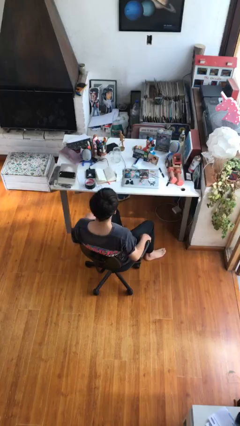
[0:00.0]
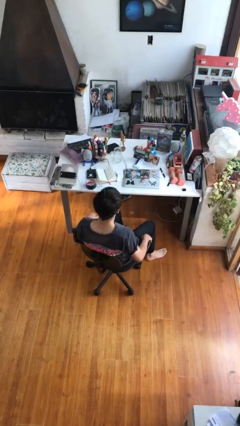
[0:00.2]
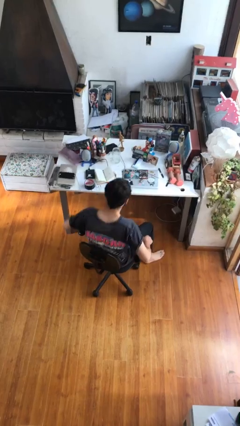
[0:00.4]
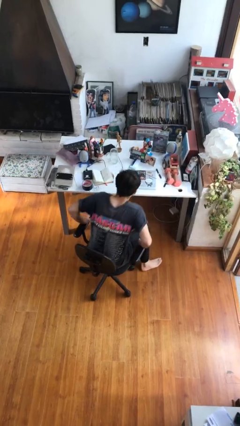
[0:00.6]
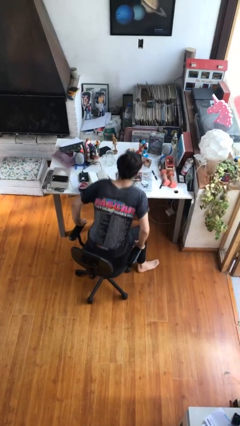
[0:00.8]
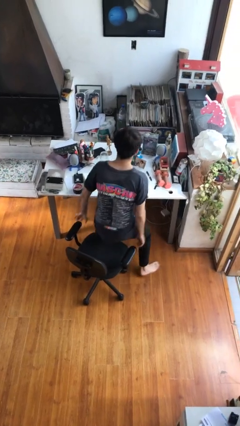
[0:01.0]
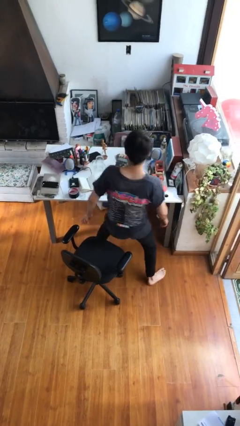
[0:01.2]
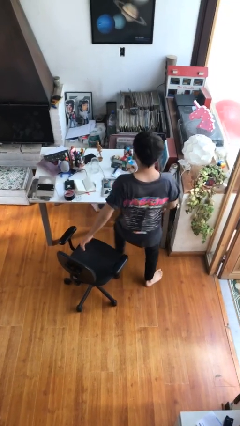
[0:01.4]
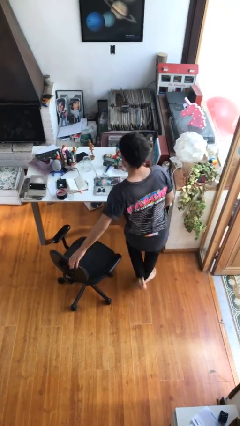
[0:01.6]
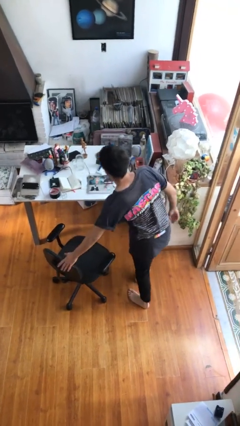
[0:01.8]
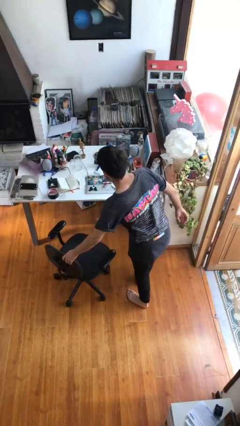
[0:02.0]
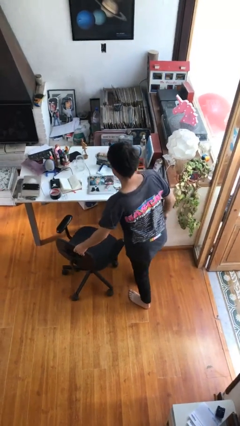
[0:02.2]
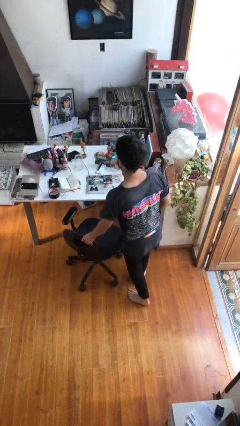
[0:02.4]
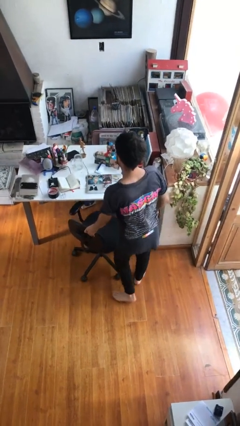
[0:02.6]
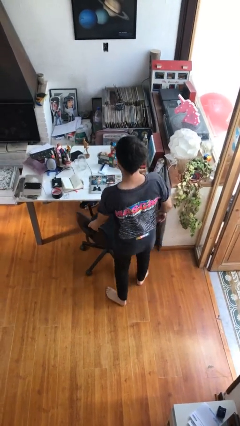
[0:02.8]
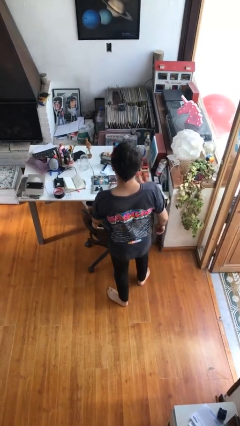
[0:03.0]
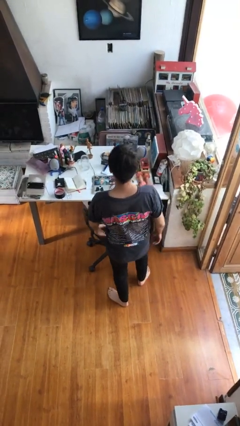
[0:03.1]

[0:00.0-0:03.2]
person stands up

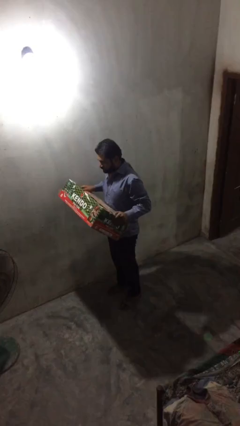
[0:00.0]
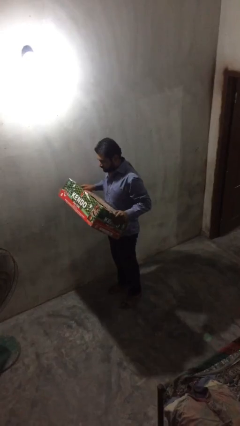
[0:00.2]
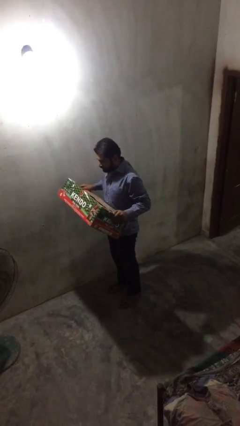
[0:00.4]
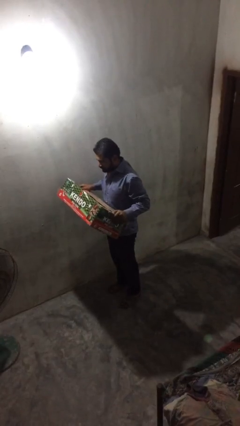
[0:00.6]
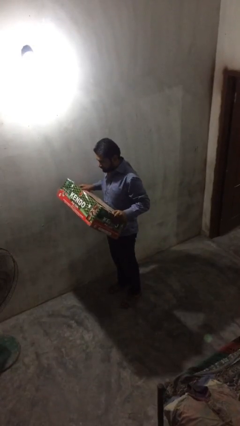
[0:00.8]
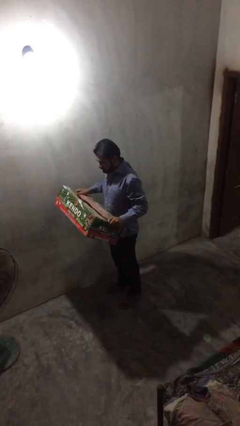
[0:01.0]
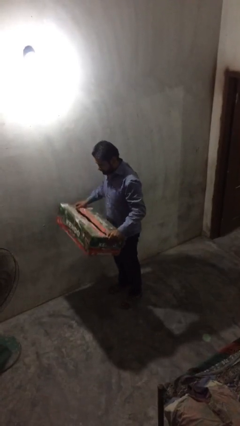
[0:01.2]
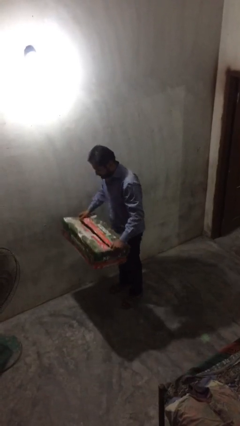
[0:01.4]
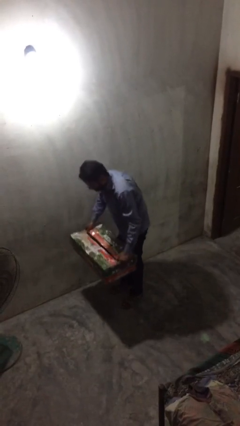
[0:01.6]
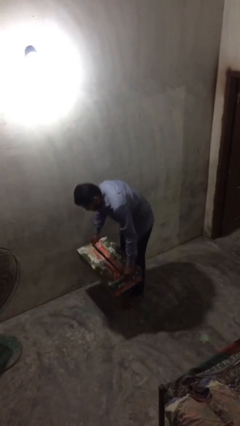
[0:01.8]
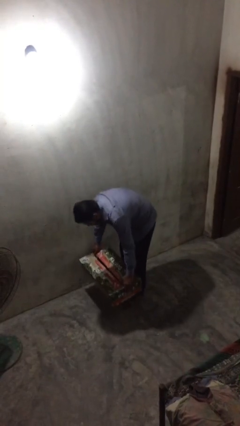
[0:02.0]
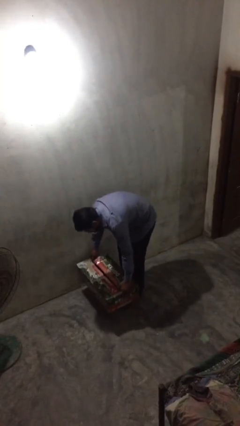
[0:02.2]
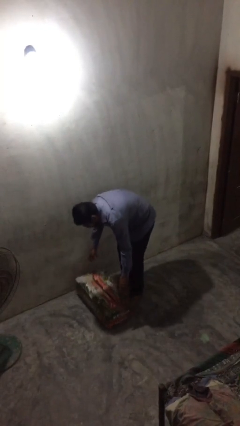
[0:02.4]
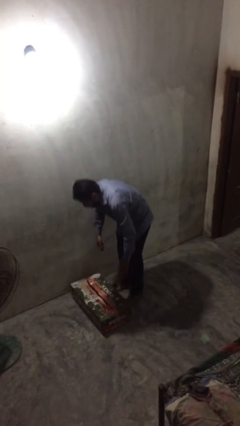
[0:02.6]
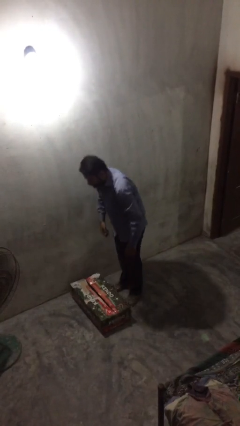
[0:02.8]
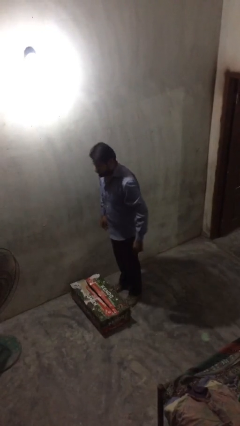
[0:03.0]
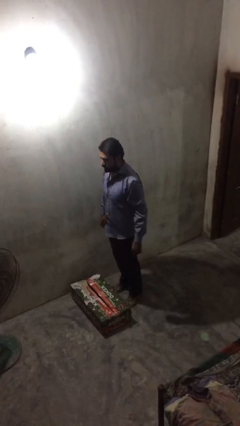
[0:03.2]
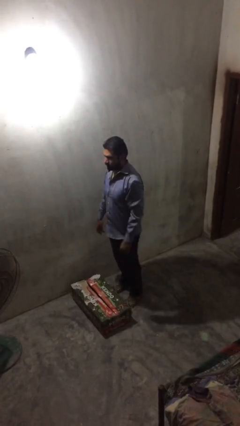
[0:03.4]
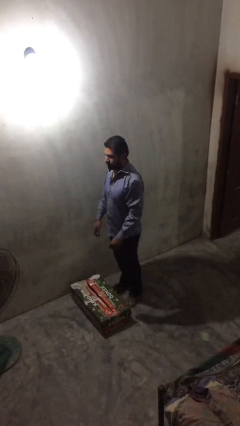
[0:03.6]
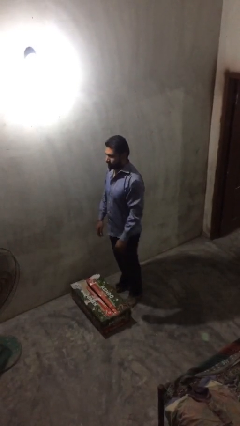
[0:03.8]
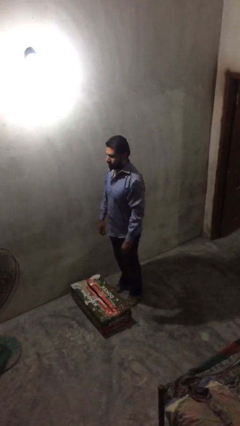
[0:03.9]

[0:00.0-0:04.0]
person puts down object on floor

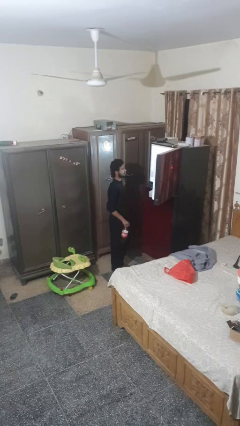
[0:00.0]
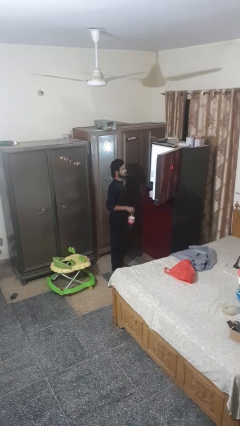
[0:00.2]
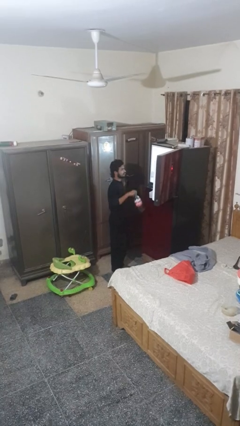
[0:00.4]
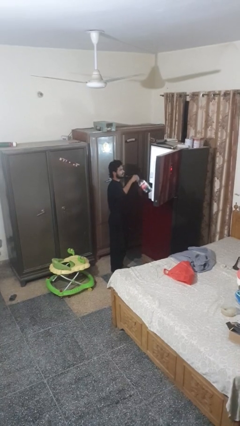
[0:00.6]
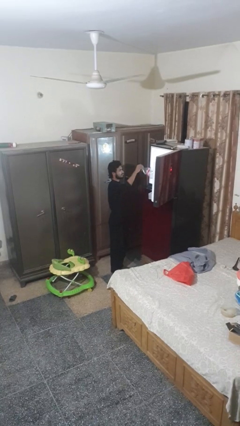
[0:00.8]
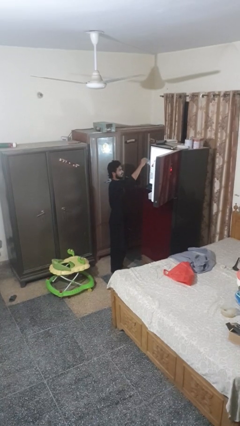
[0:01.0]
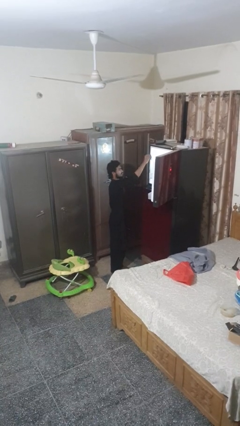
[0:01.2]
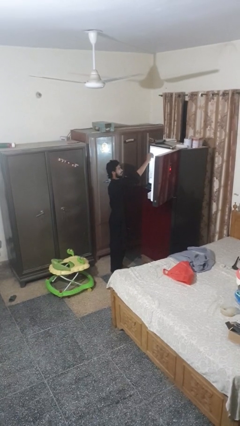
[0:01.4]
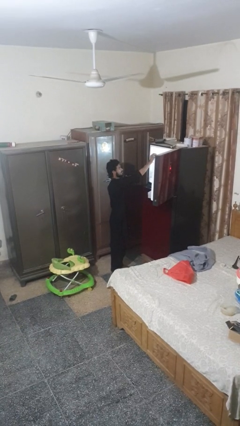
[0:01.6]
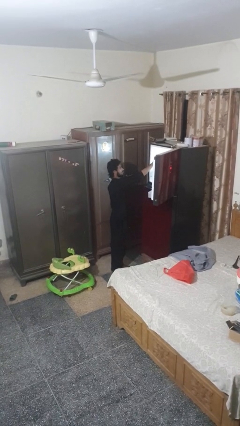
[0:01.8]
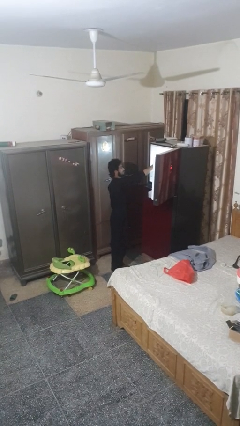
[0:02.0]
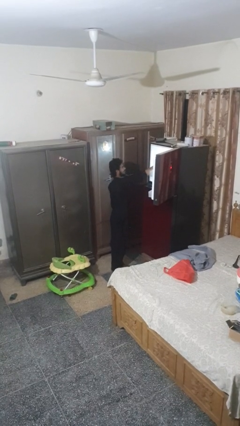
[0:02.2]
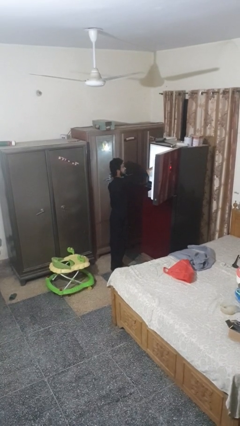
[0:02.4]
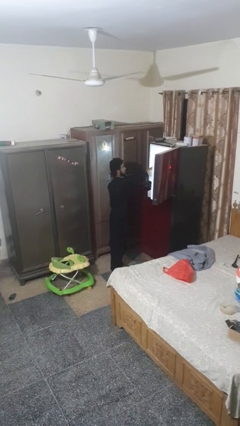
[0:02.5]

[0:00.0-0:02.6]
person puts object into refrigerator

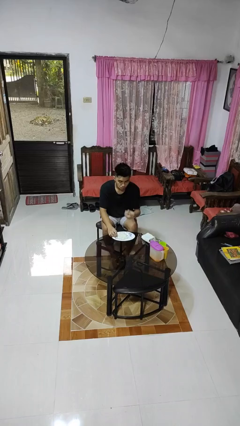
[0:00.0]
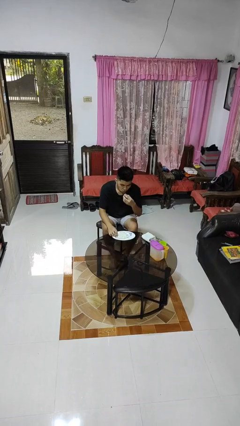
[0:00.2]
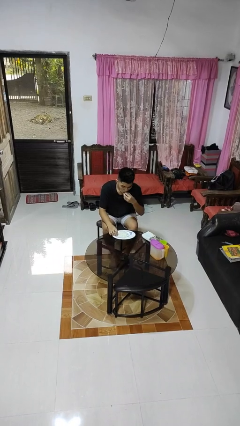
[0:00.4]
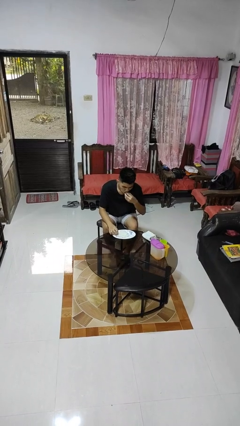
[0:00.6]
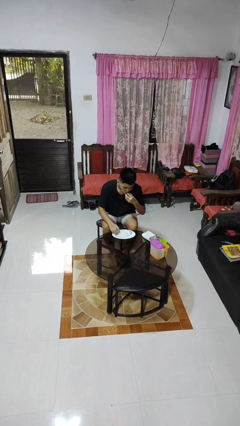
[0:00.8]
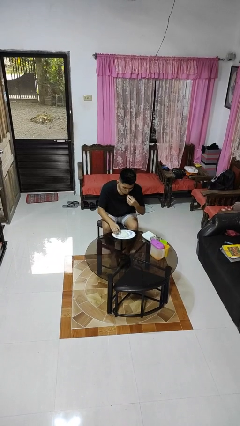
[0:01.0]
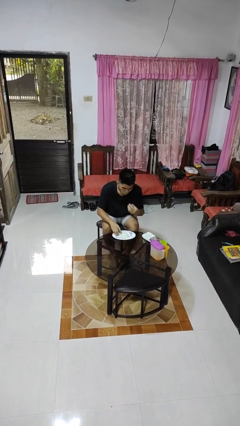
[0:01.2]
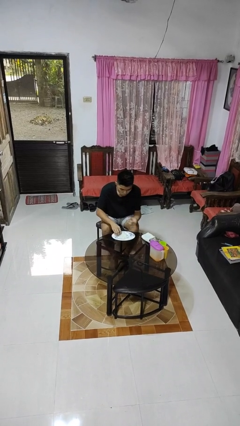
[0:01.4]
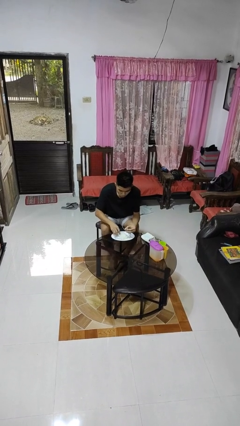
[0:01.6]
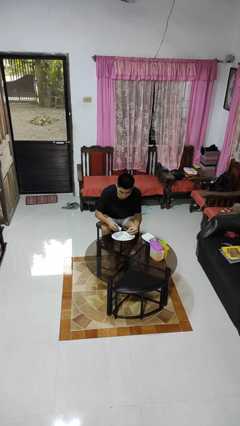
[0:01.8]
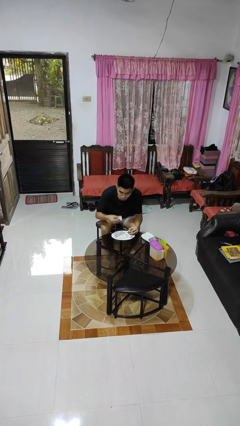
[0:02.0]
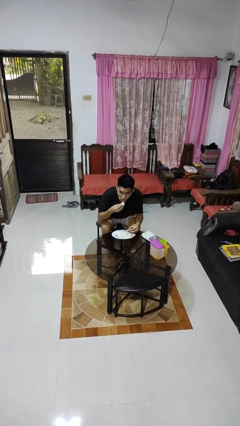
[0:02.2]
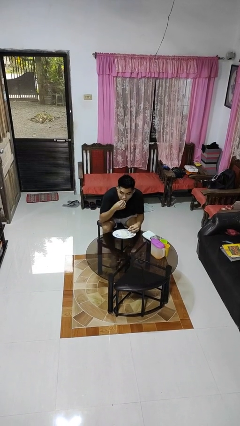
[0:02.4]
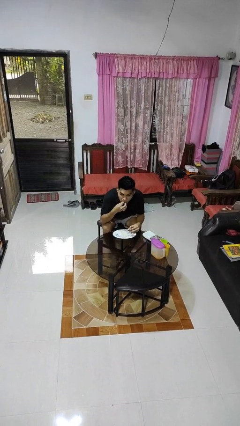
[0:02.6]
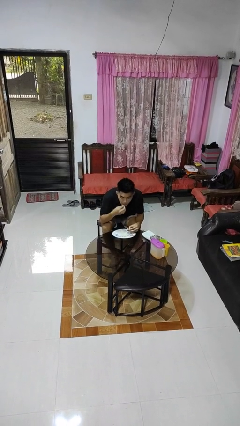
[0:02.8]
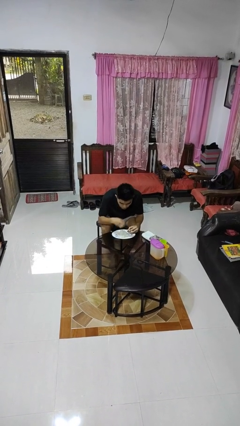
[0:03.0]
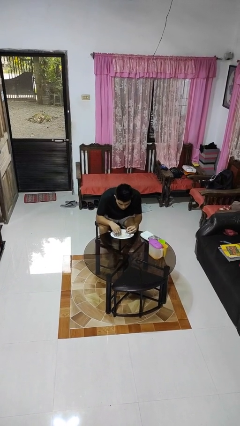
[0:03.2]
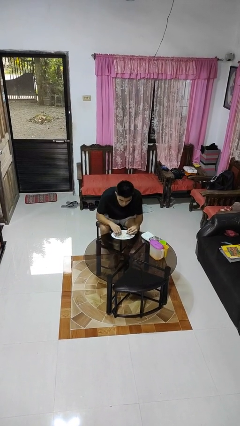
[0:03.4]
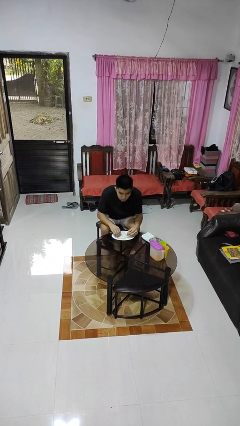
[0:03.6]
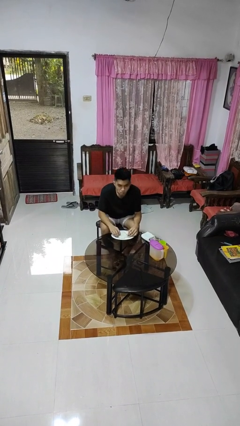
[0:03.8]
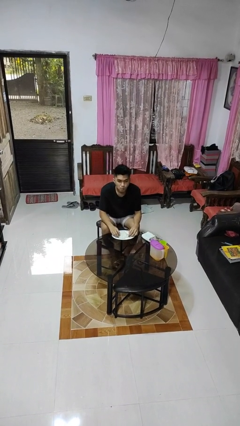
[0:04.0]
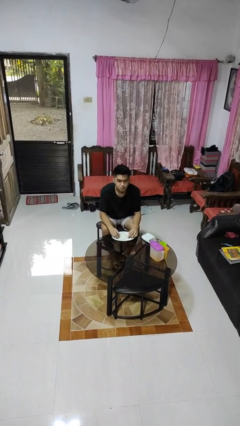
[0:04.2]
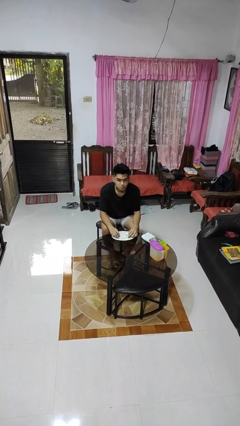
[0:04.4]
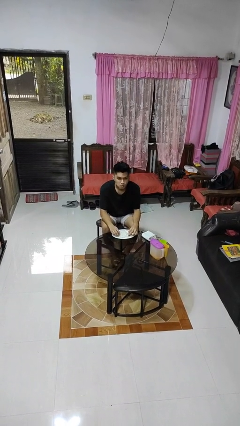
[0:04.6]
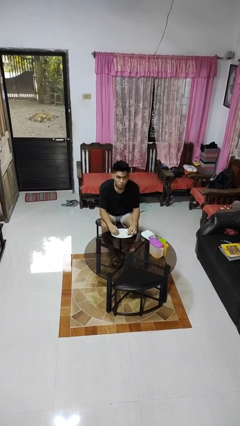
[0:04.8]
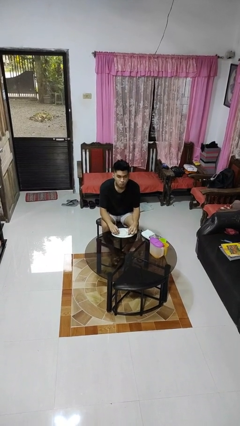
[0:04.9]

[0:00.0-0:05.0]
person eats with hands

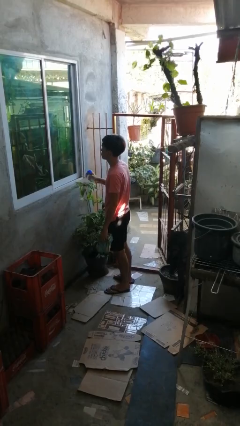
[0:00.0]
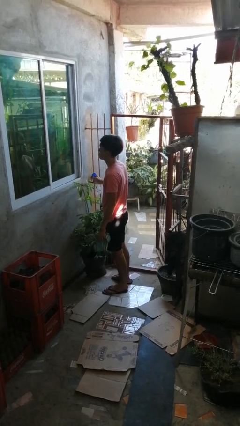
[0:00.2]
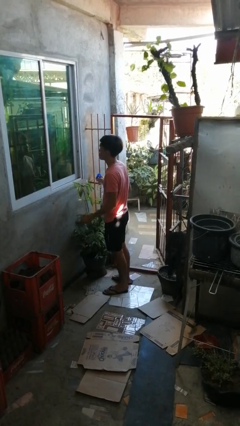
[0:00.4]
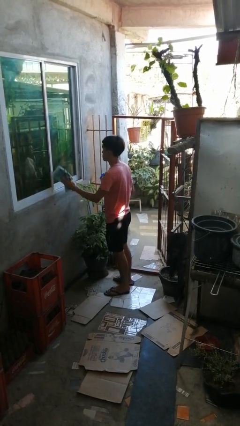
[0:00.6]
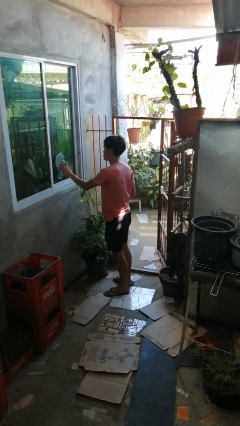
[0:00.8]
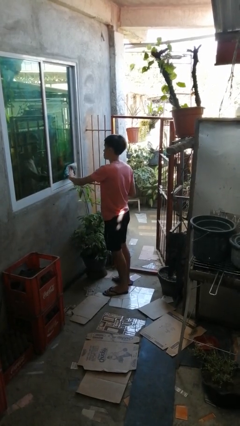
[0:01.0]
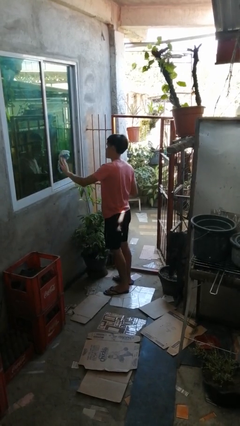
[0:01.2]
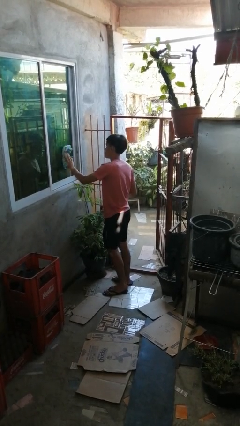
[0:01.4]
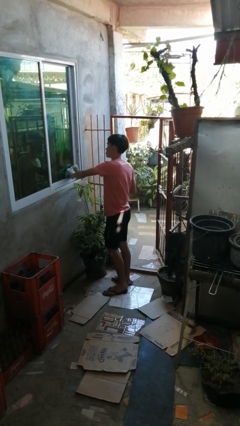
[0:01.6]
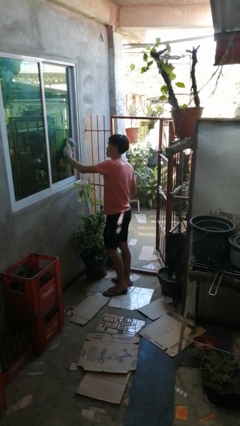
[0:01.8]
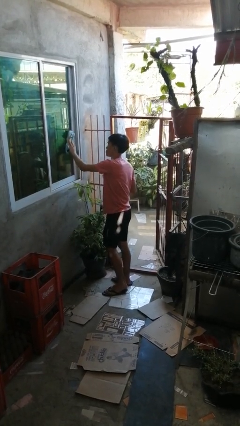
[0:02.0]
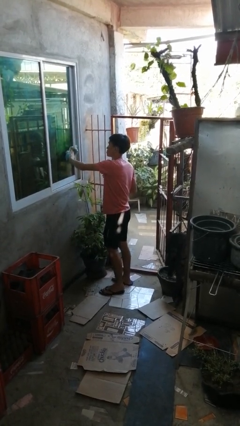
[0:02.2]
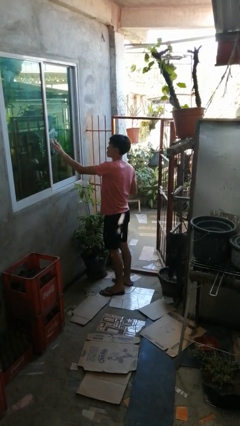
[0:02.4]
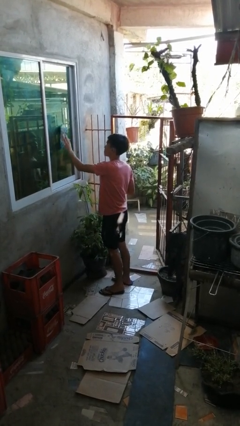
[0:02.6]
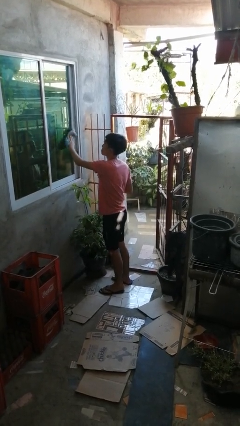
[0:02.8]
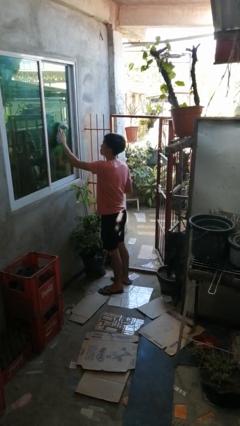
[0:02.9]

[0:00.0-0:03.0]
person washes window
